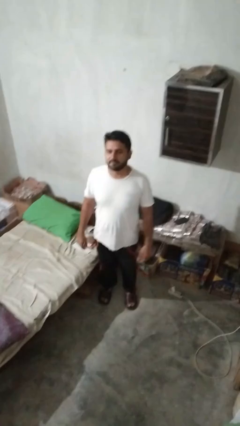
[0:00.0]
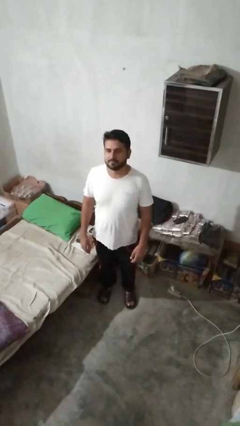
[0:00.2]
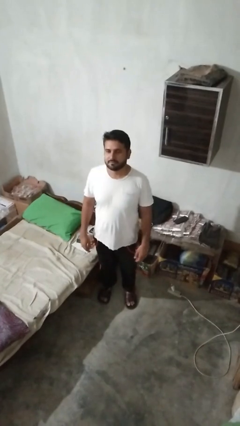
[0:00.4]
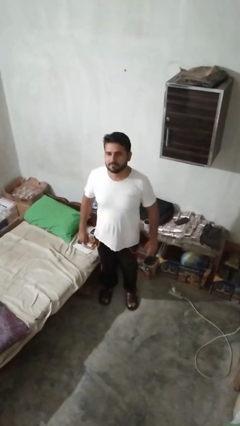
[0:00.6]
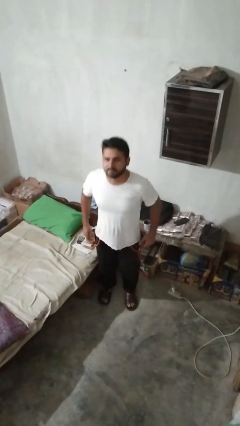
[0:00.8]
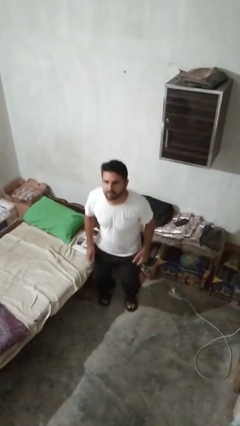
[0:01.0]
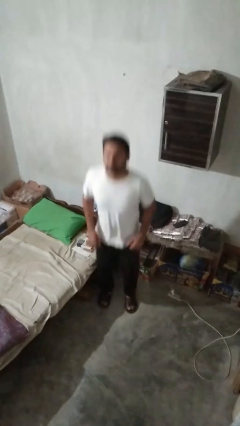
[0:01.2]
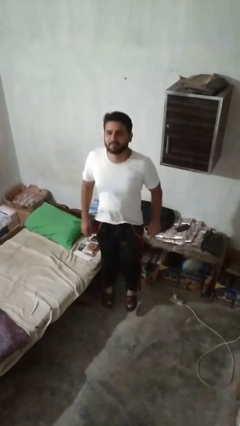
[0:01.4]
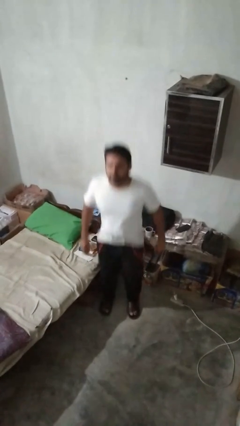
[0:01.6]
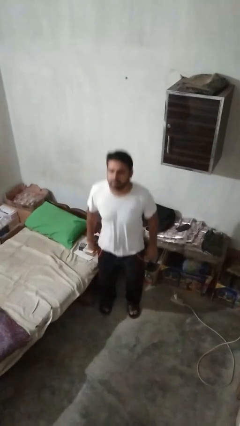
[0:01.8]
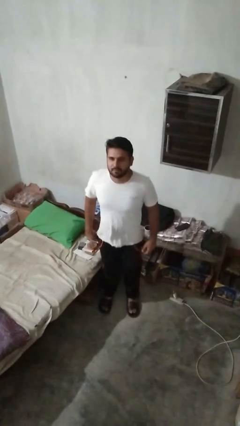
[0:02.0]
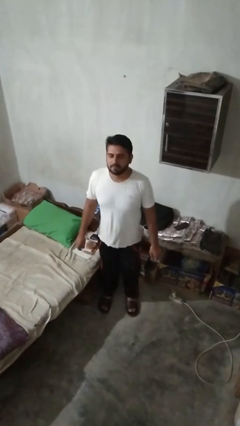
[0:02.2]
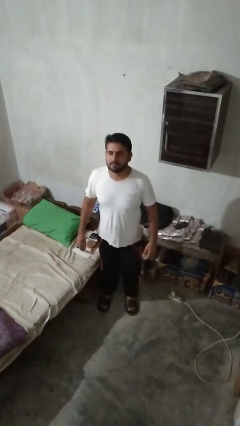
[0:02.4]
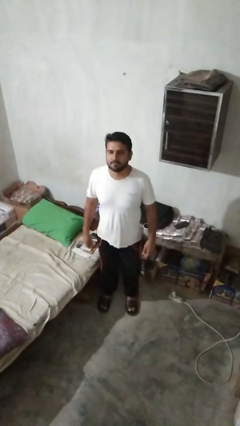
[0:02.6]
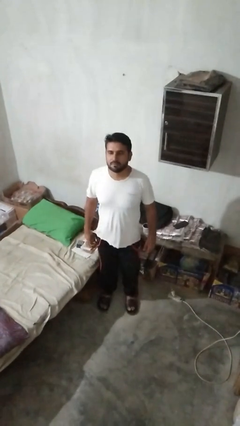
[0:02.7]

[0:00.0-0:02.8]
person jumps

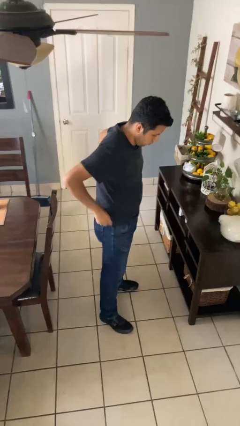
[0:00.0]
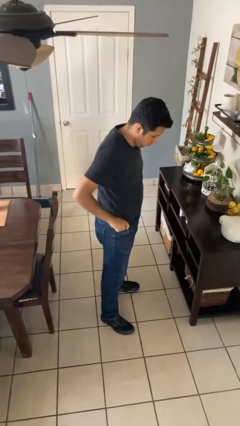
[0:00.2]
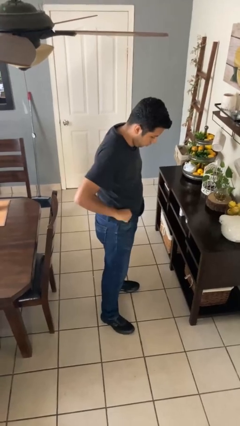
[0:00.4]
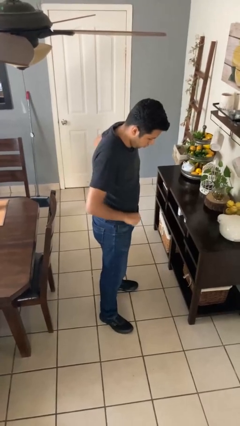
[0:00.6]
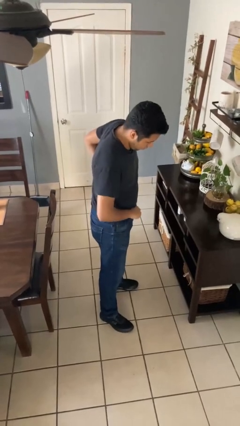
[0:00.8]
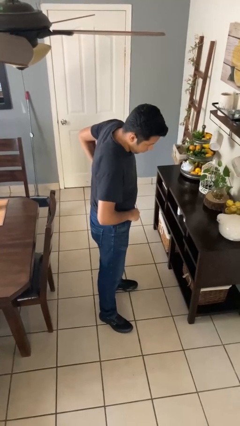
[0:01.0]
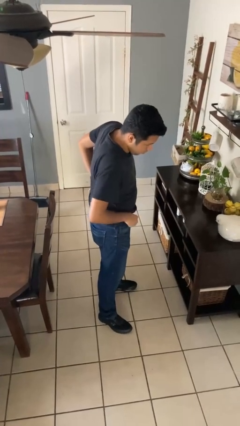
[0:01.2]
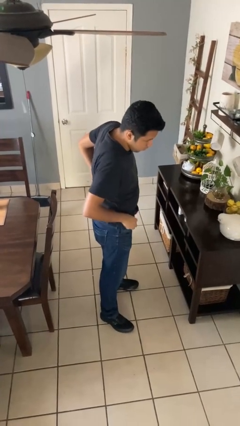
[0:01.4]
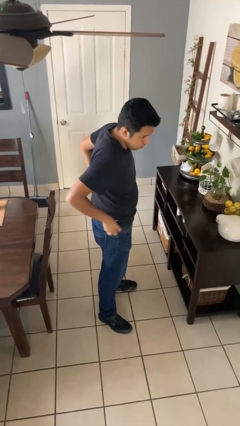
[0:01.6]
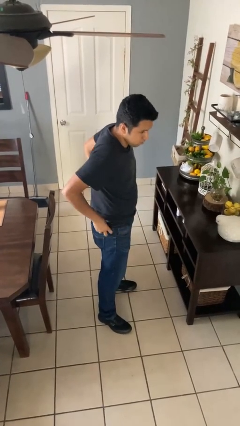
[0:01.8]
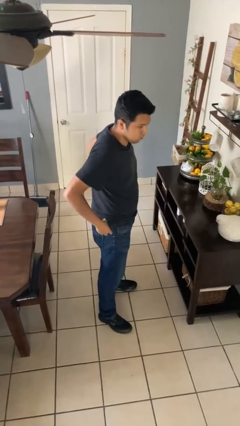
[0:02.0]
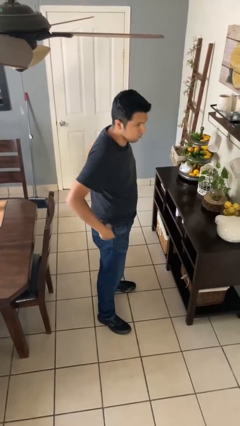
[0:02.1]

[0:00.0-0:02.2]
person hikes up pants

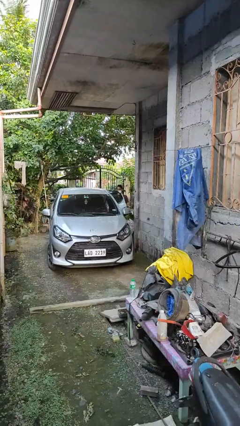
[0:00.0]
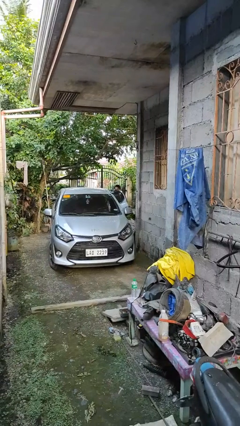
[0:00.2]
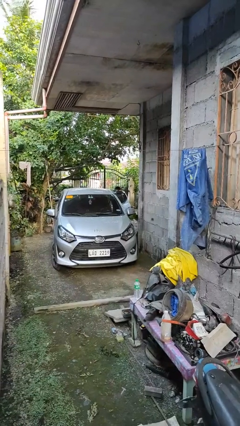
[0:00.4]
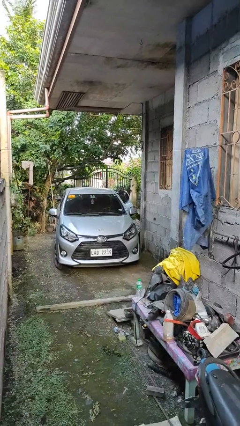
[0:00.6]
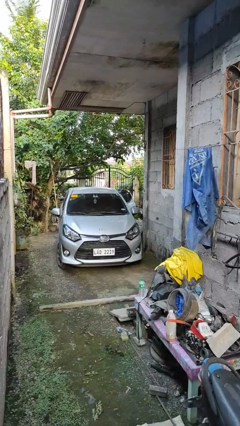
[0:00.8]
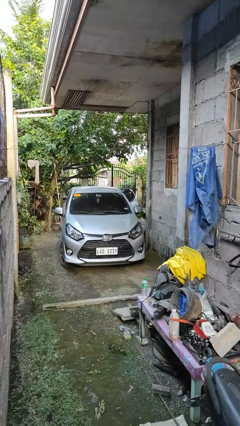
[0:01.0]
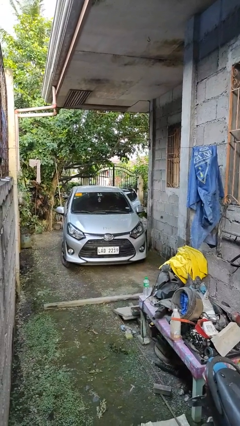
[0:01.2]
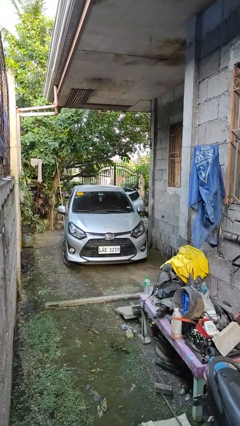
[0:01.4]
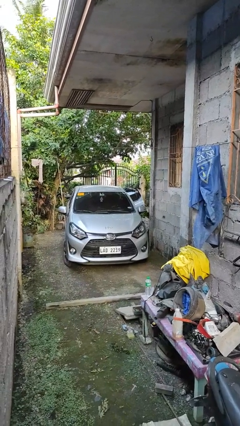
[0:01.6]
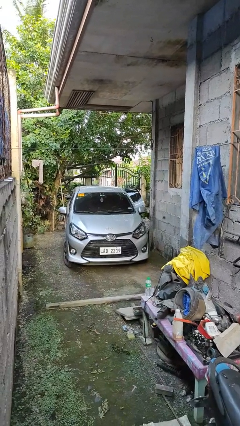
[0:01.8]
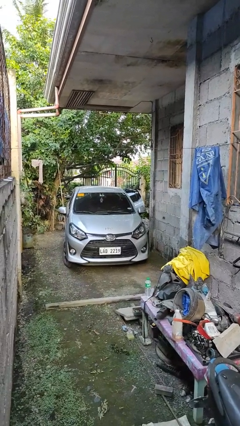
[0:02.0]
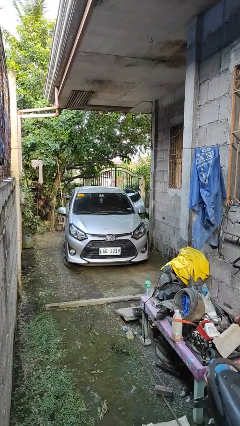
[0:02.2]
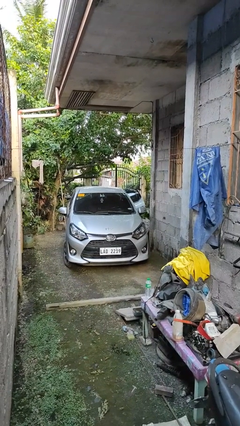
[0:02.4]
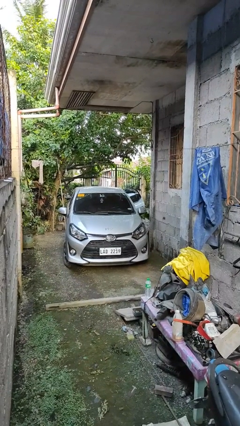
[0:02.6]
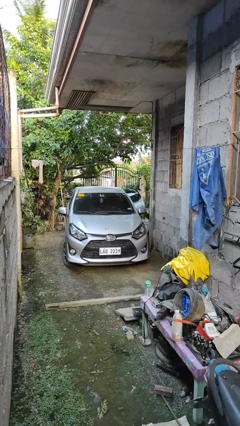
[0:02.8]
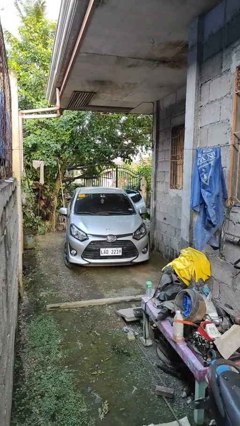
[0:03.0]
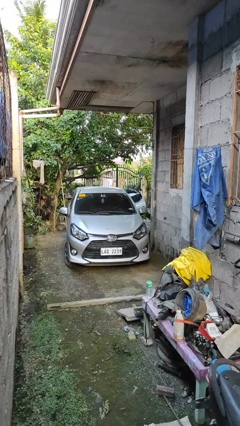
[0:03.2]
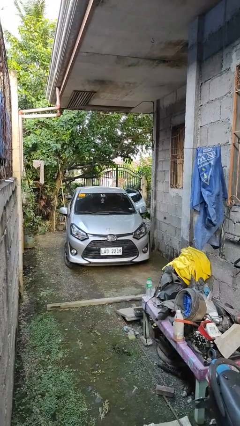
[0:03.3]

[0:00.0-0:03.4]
person enters car

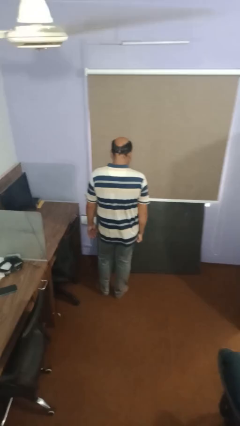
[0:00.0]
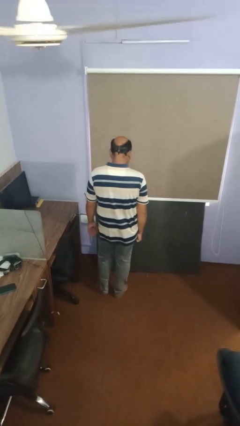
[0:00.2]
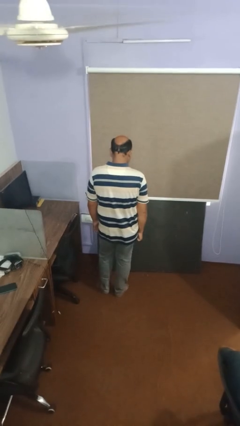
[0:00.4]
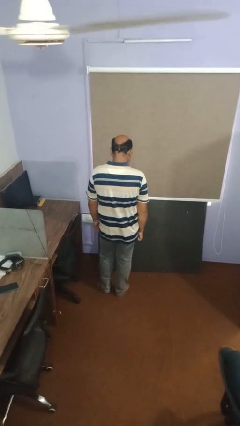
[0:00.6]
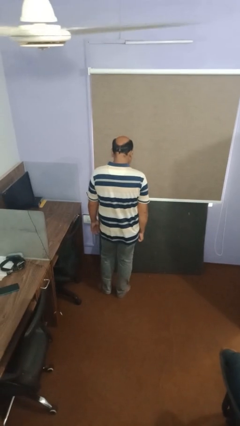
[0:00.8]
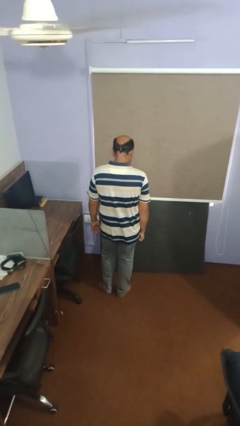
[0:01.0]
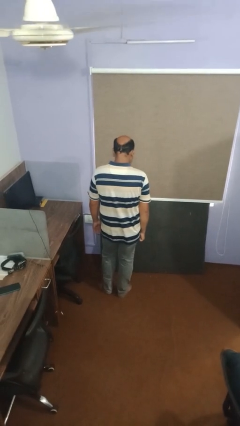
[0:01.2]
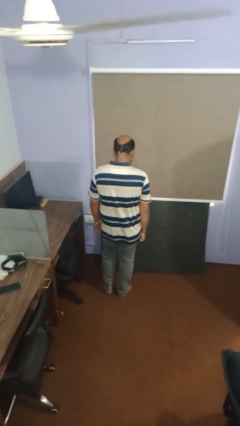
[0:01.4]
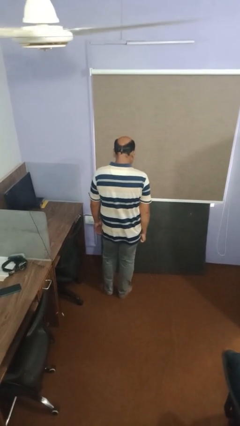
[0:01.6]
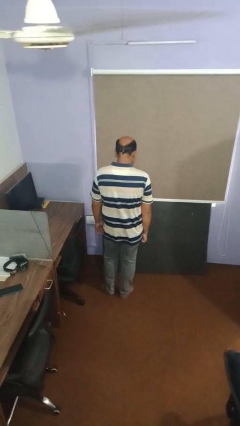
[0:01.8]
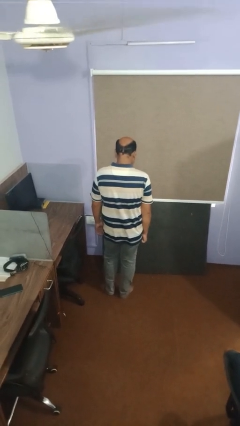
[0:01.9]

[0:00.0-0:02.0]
person gestures thumbs down

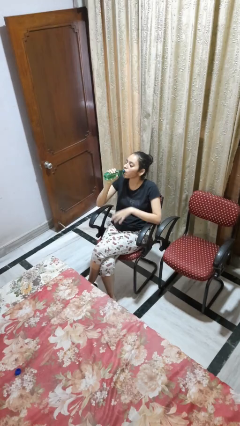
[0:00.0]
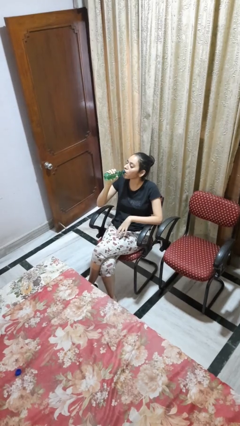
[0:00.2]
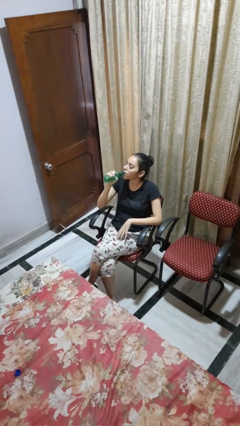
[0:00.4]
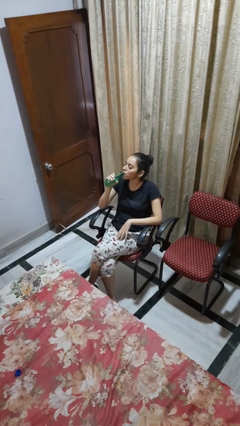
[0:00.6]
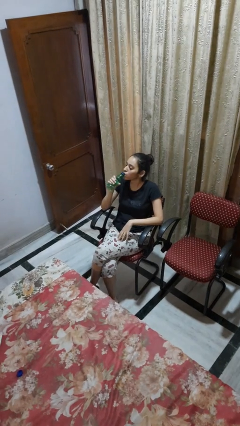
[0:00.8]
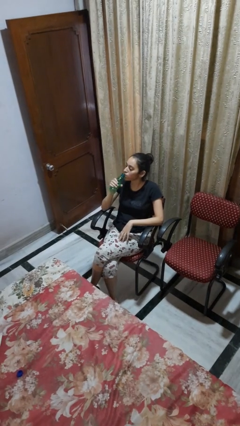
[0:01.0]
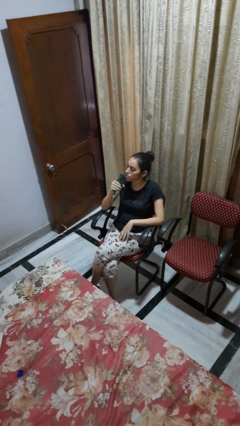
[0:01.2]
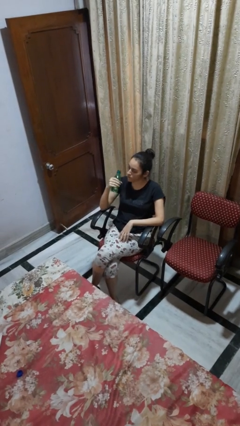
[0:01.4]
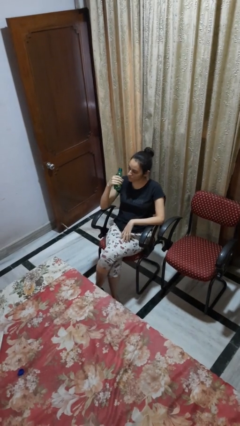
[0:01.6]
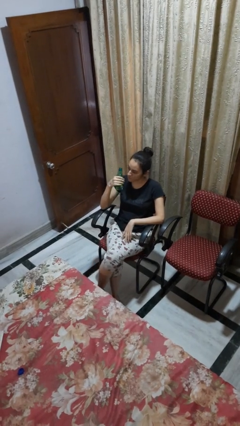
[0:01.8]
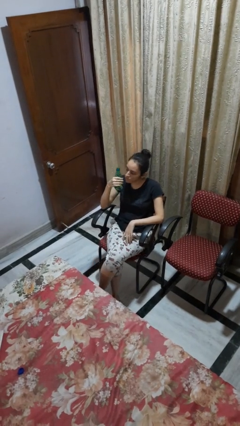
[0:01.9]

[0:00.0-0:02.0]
person drinks from bottle

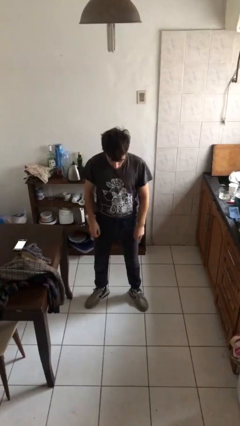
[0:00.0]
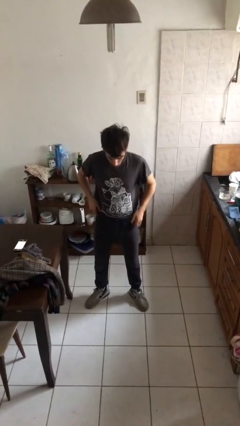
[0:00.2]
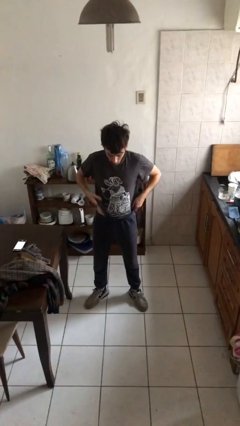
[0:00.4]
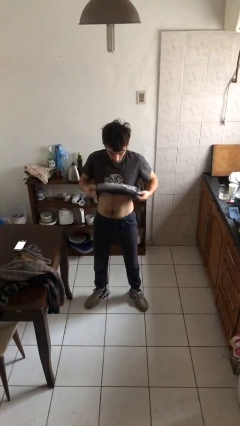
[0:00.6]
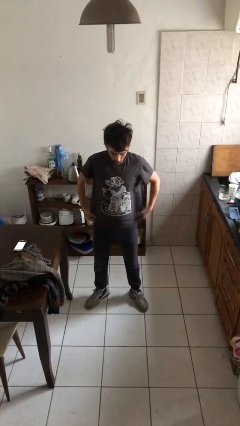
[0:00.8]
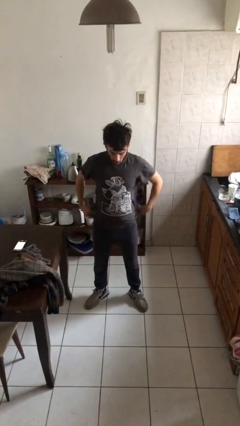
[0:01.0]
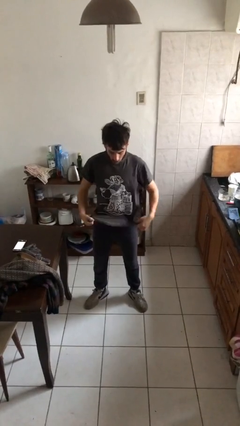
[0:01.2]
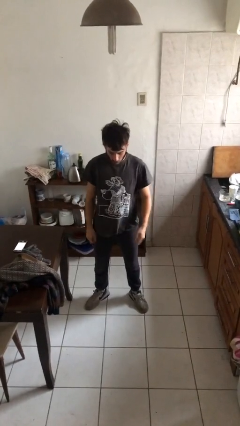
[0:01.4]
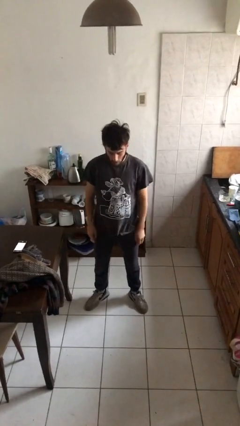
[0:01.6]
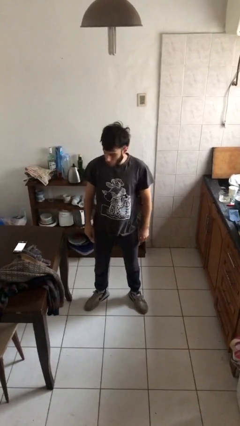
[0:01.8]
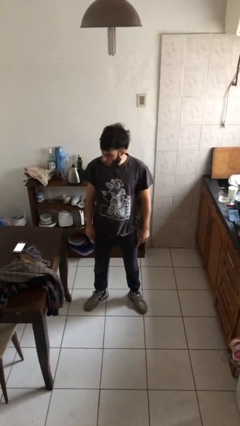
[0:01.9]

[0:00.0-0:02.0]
person untucks shirt

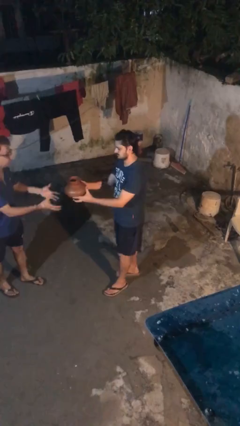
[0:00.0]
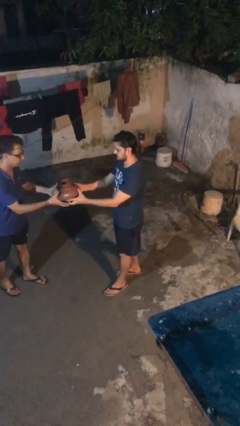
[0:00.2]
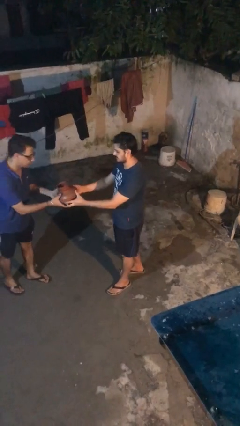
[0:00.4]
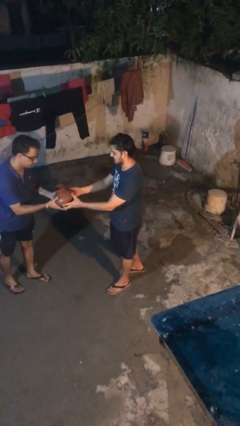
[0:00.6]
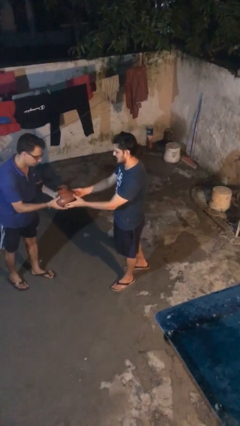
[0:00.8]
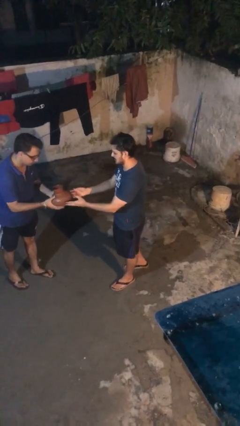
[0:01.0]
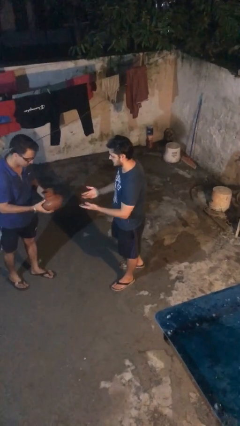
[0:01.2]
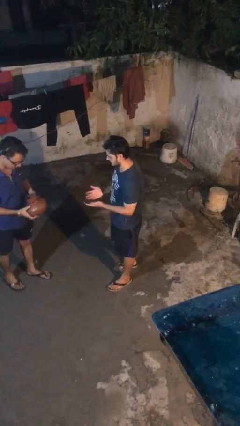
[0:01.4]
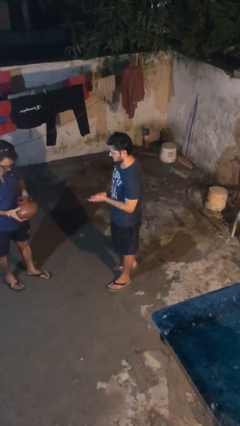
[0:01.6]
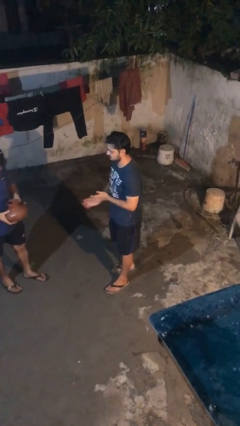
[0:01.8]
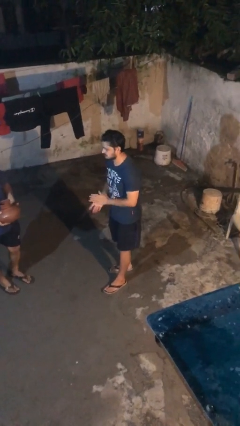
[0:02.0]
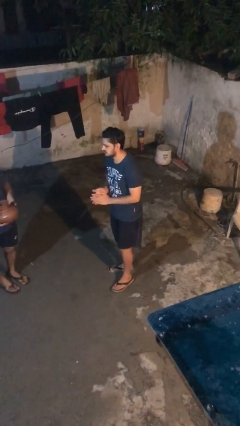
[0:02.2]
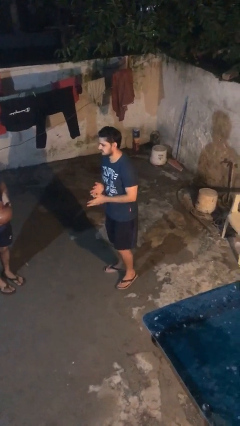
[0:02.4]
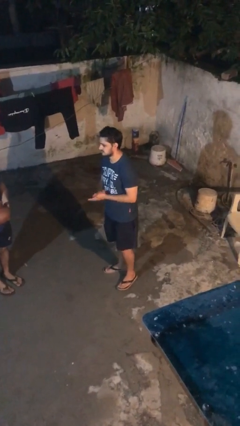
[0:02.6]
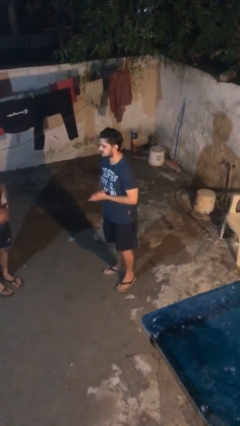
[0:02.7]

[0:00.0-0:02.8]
person transfers object to person
